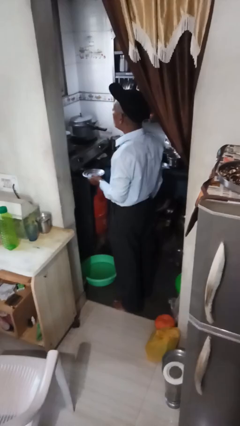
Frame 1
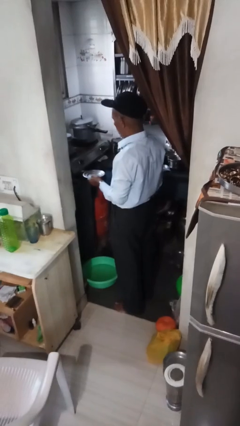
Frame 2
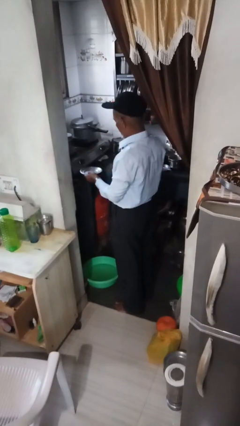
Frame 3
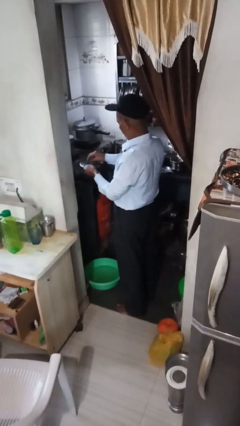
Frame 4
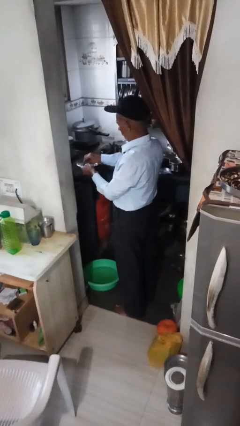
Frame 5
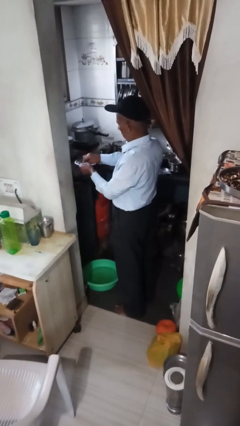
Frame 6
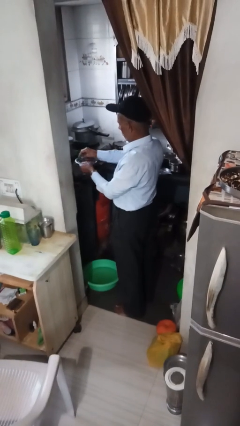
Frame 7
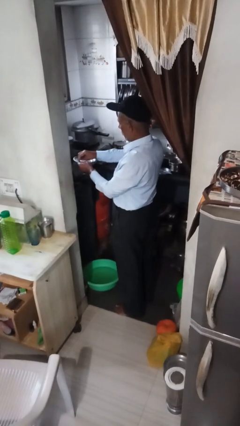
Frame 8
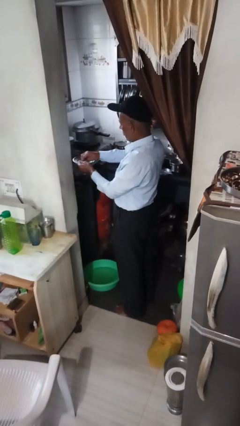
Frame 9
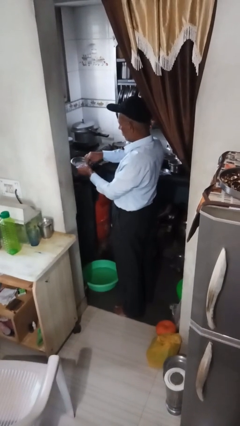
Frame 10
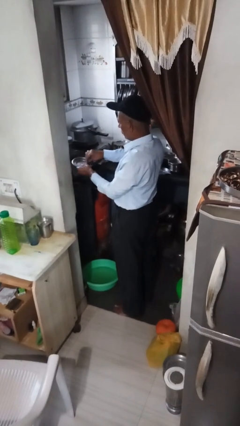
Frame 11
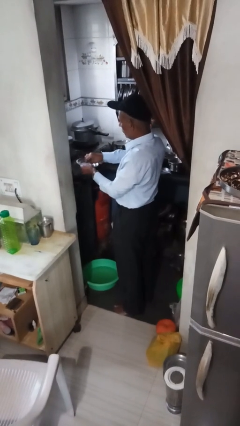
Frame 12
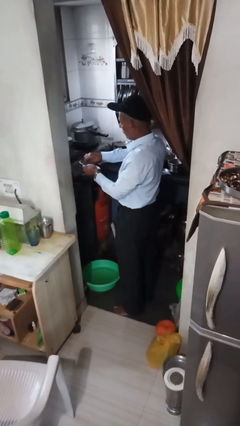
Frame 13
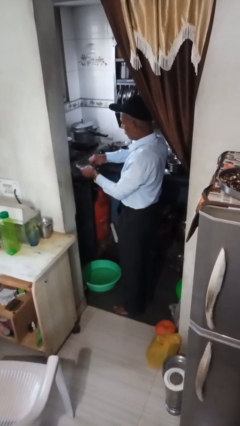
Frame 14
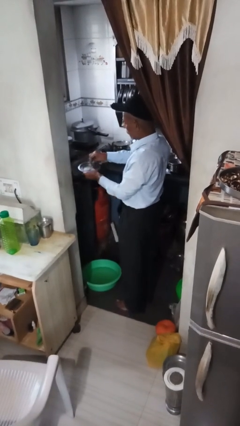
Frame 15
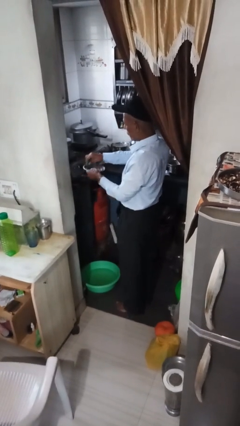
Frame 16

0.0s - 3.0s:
person washes dish

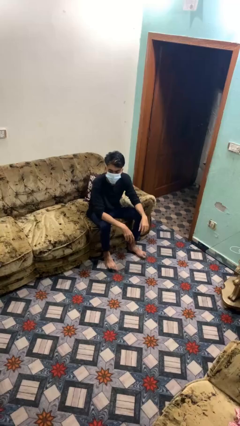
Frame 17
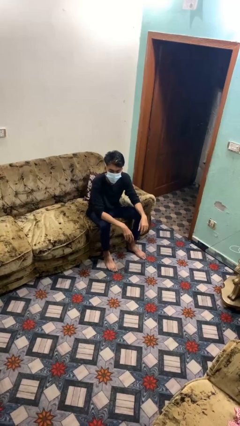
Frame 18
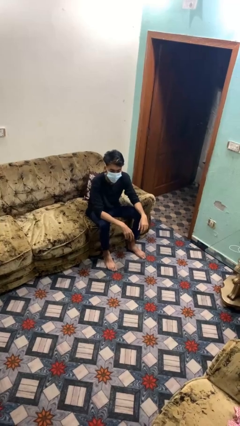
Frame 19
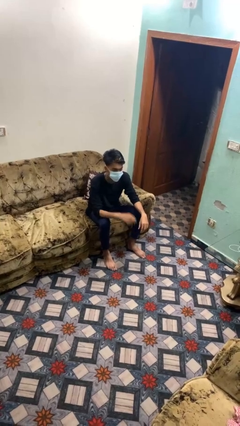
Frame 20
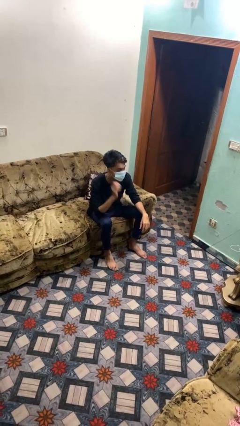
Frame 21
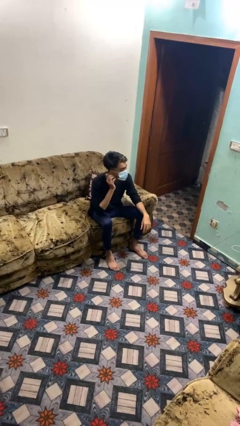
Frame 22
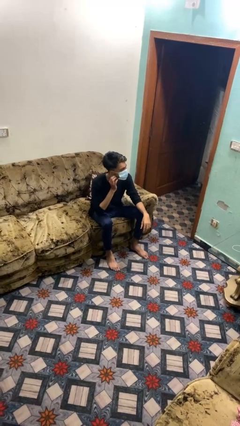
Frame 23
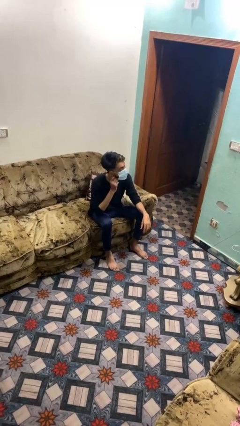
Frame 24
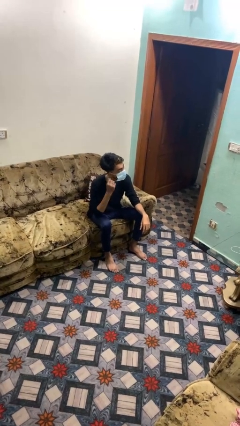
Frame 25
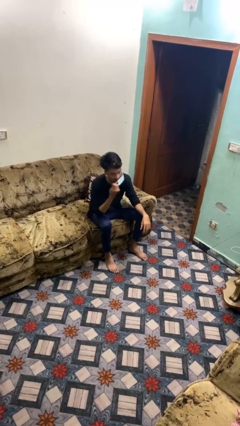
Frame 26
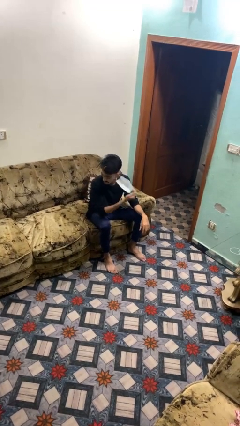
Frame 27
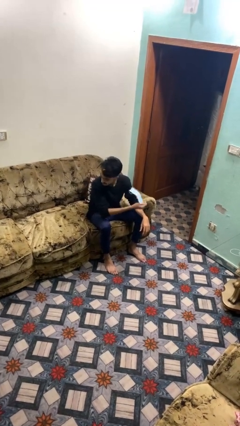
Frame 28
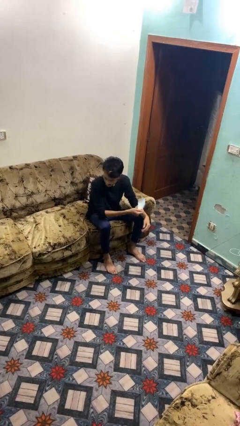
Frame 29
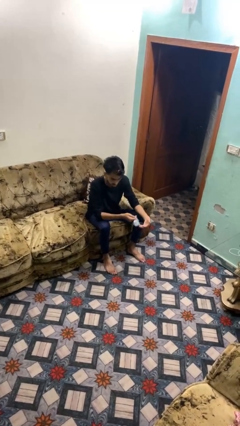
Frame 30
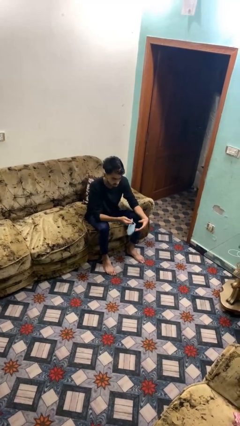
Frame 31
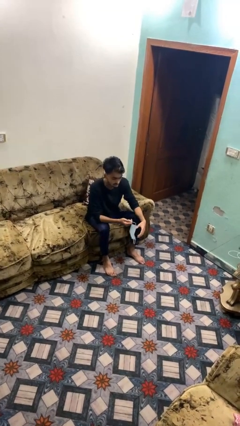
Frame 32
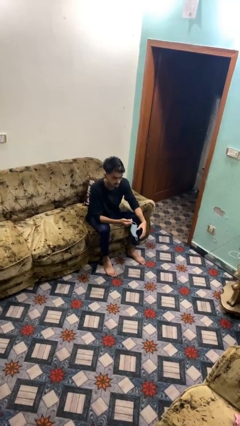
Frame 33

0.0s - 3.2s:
person takes off facemask

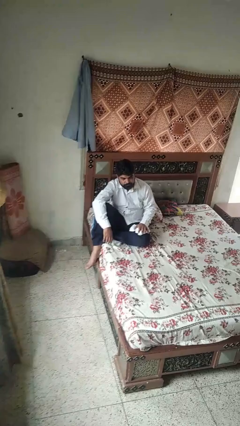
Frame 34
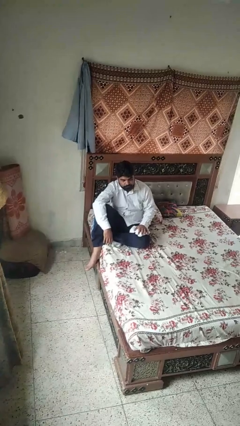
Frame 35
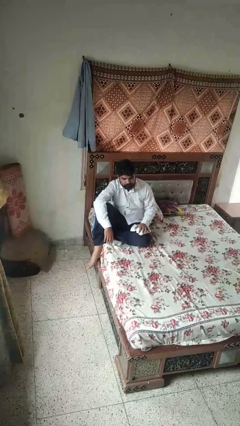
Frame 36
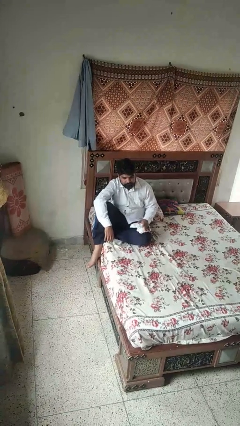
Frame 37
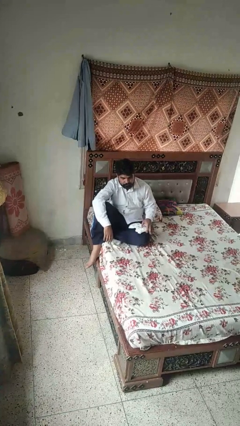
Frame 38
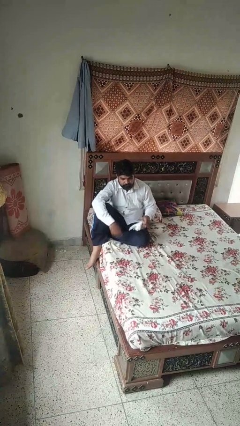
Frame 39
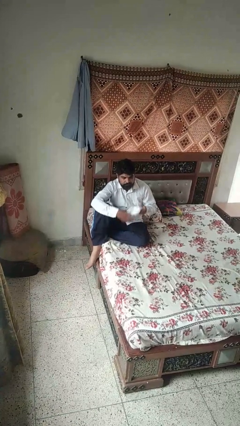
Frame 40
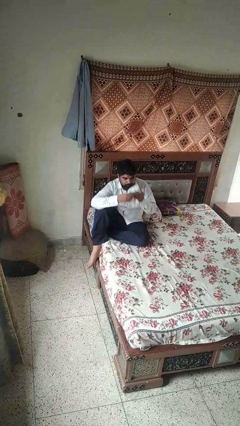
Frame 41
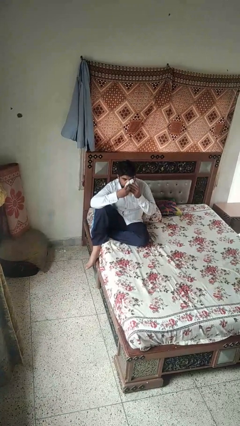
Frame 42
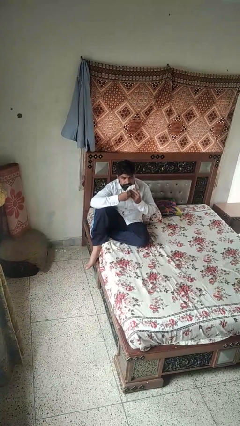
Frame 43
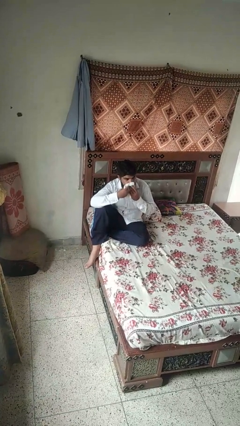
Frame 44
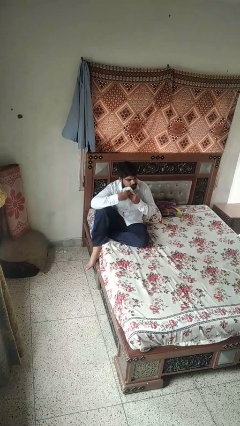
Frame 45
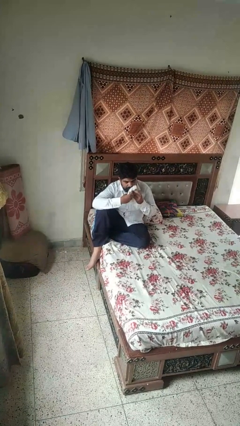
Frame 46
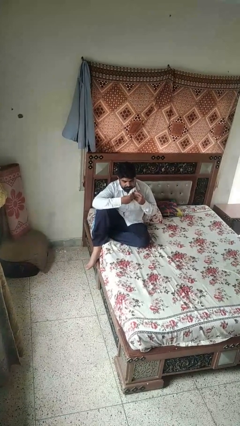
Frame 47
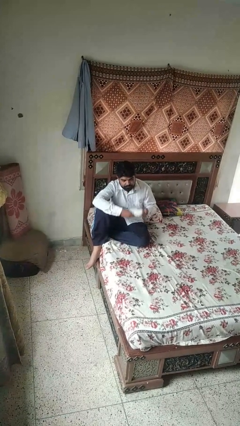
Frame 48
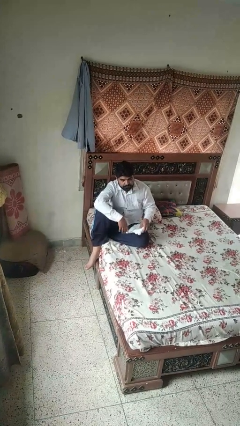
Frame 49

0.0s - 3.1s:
person wipes mouth with napkin

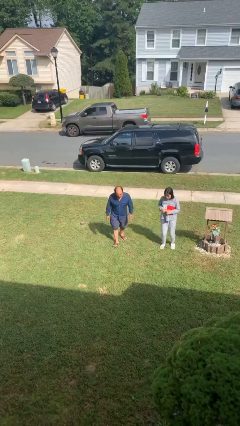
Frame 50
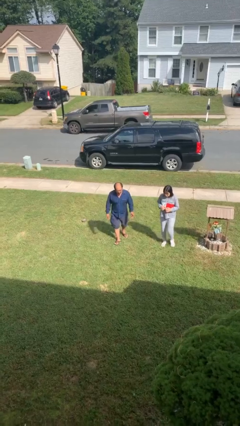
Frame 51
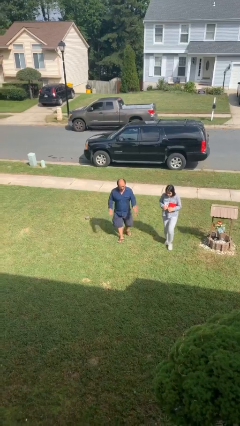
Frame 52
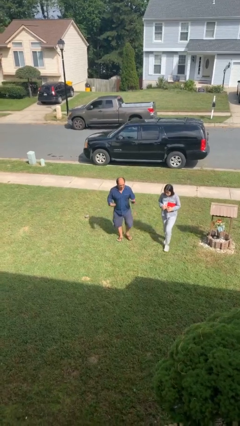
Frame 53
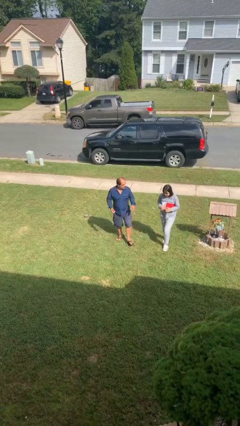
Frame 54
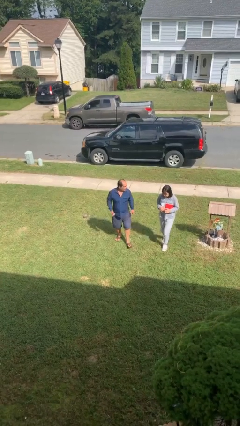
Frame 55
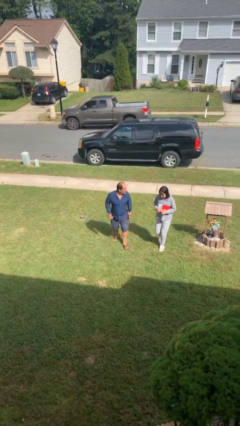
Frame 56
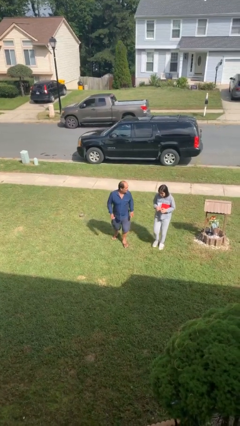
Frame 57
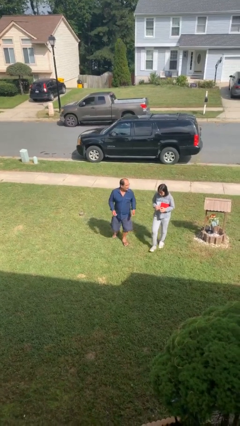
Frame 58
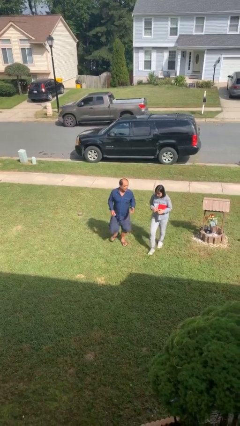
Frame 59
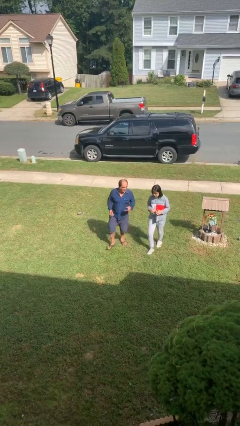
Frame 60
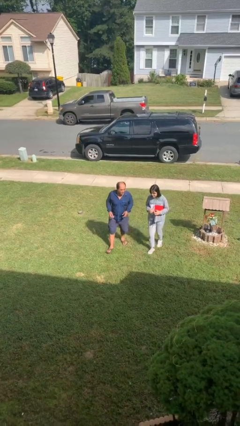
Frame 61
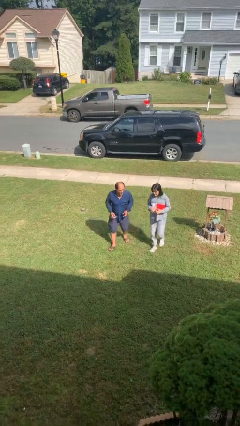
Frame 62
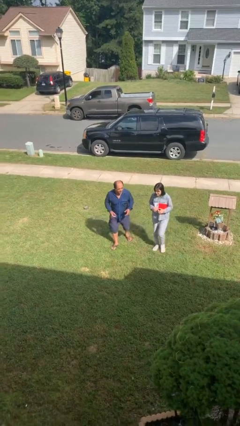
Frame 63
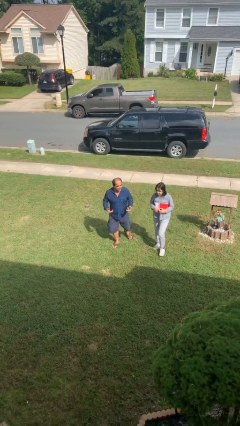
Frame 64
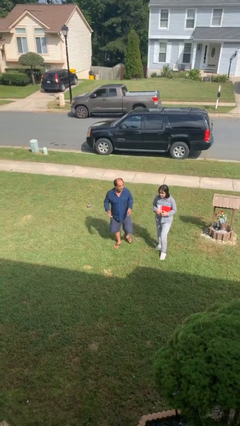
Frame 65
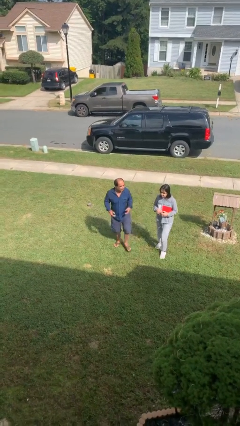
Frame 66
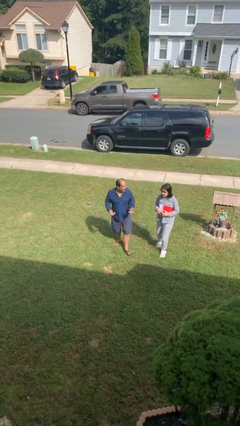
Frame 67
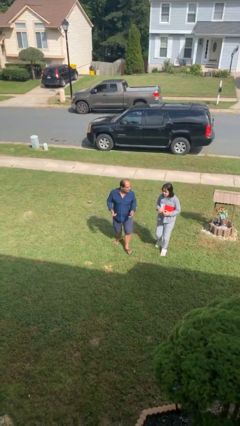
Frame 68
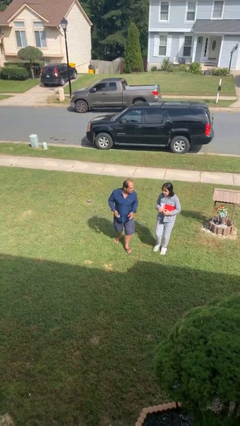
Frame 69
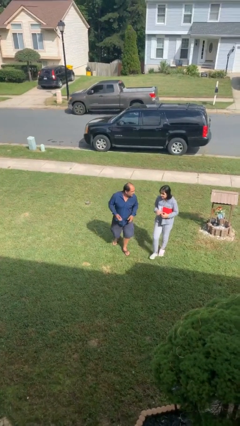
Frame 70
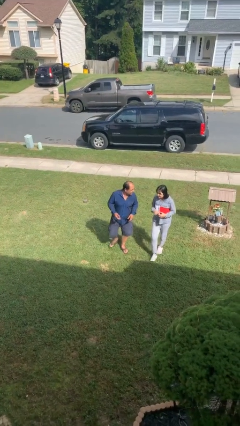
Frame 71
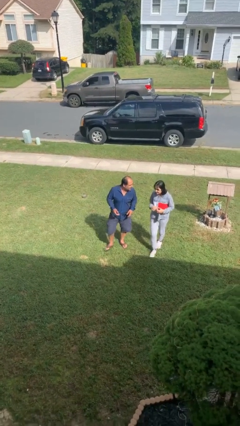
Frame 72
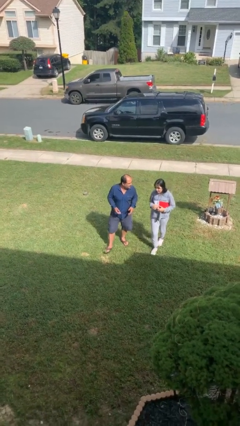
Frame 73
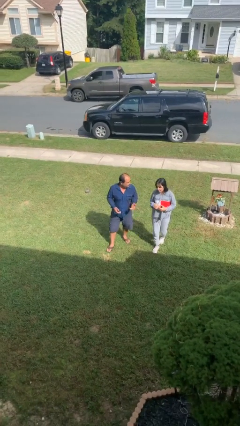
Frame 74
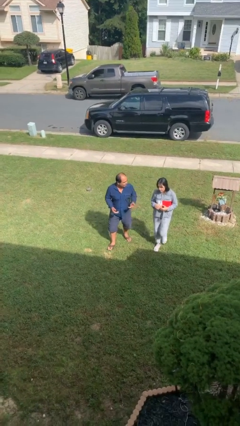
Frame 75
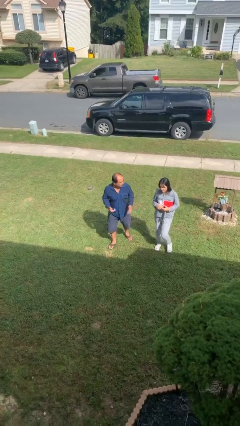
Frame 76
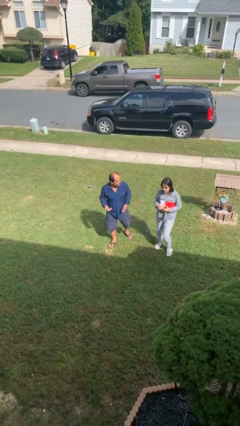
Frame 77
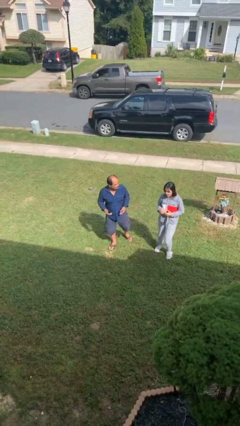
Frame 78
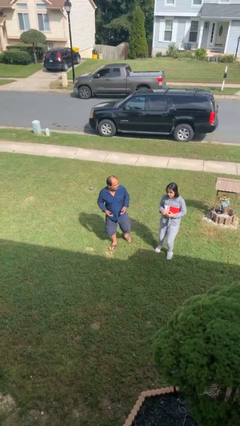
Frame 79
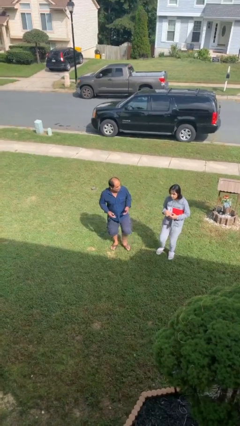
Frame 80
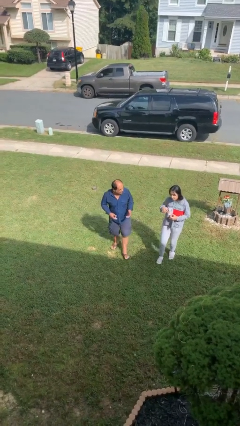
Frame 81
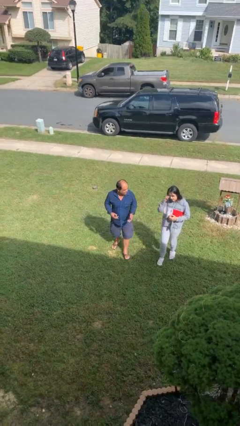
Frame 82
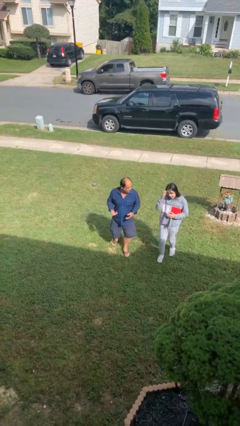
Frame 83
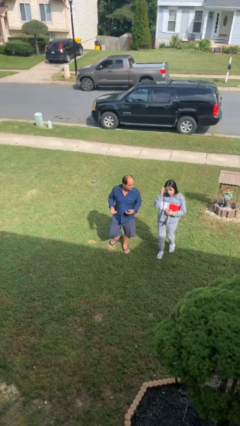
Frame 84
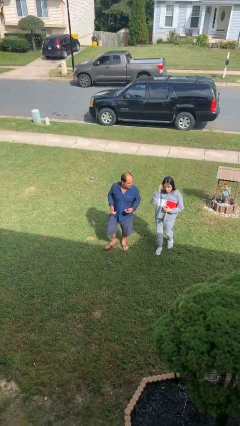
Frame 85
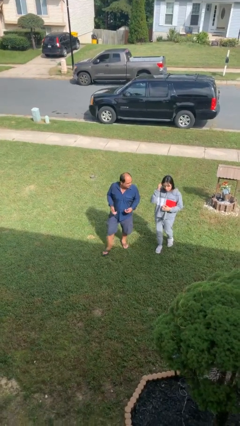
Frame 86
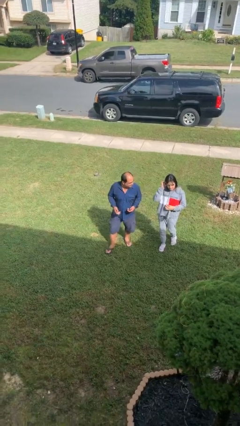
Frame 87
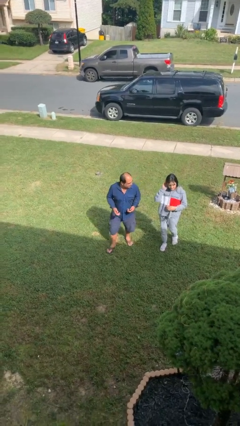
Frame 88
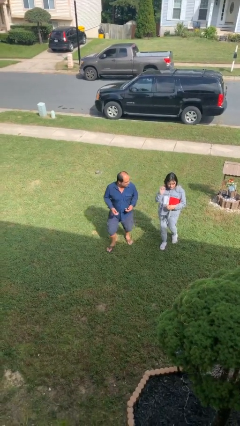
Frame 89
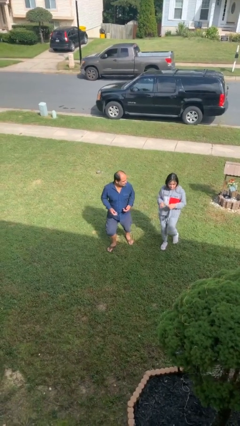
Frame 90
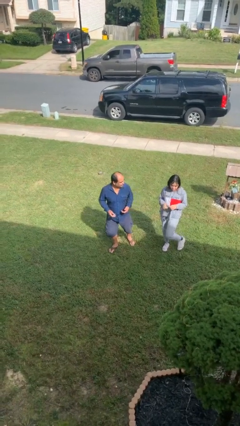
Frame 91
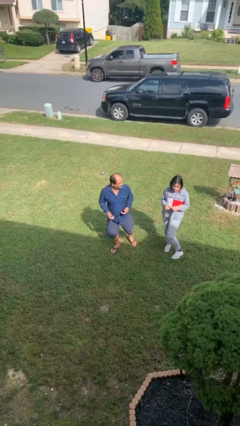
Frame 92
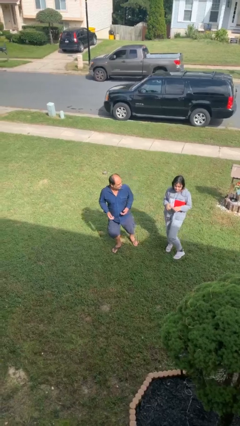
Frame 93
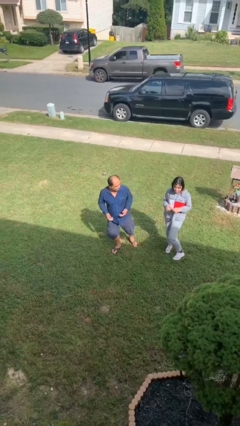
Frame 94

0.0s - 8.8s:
person talks to person
